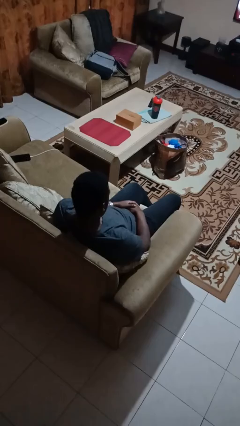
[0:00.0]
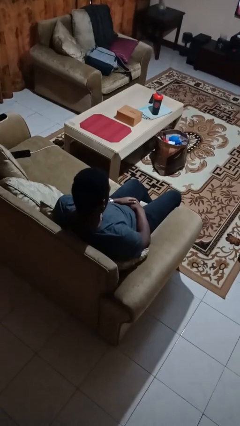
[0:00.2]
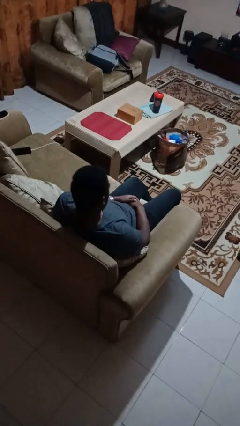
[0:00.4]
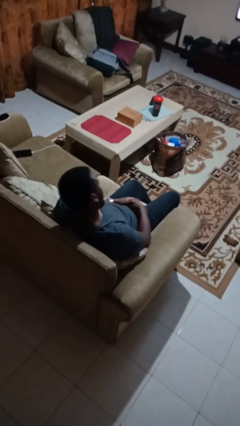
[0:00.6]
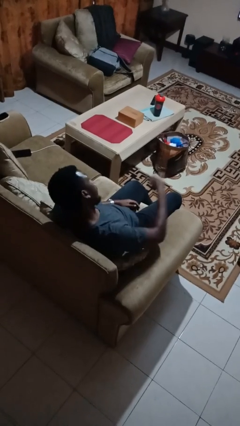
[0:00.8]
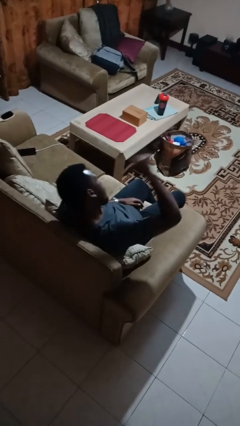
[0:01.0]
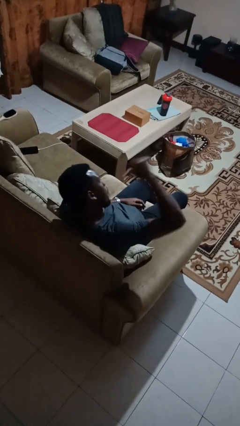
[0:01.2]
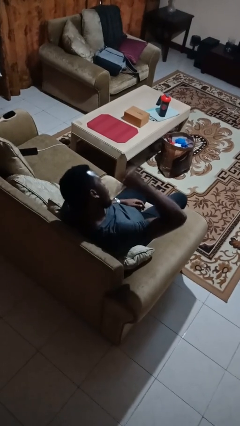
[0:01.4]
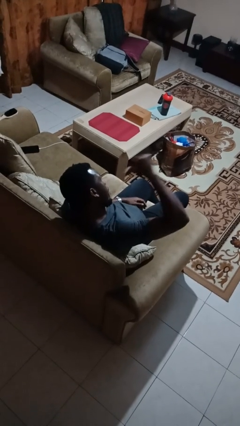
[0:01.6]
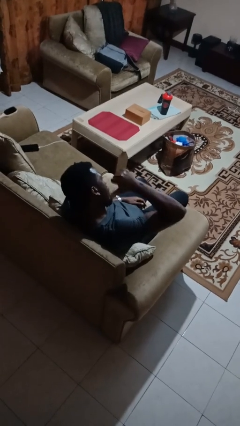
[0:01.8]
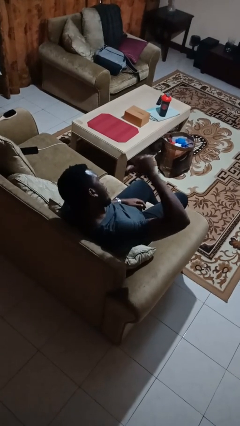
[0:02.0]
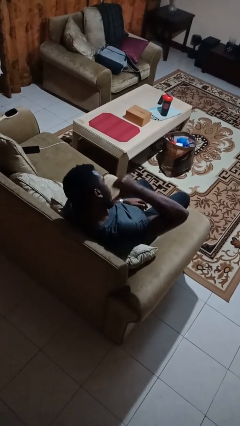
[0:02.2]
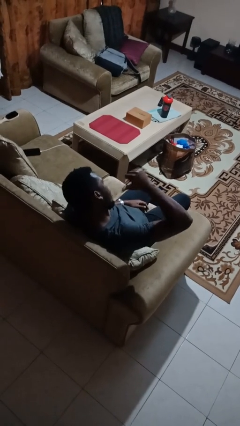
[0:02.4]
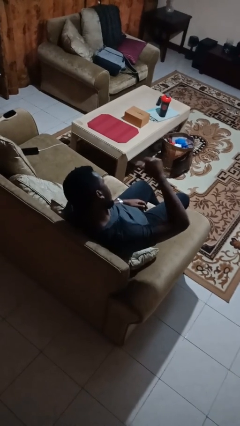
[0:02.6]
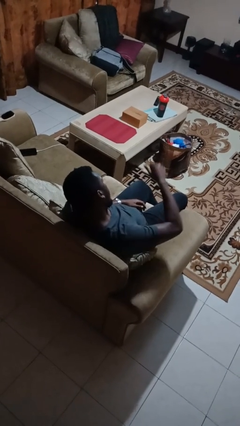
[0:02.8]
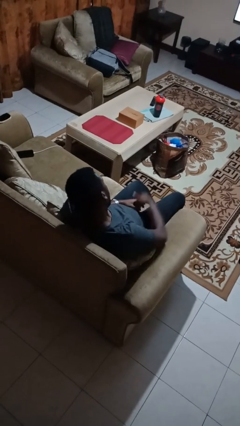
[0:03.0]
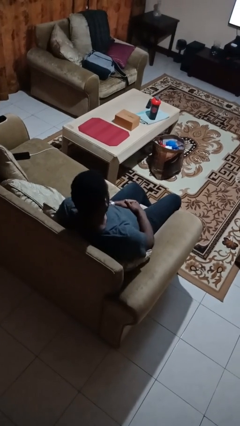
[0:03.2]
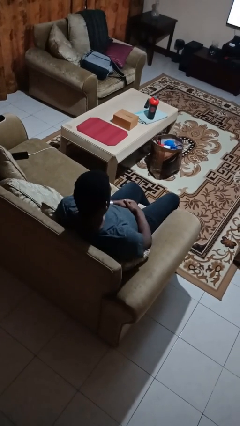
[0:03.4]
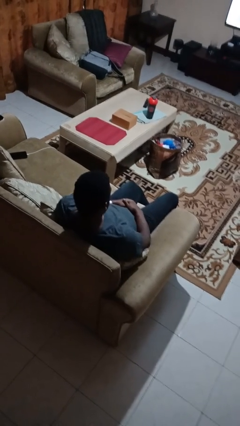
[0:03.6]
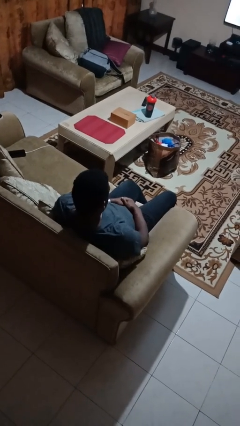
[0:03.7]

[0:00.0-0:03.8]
person gestures behind me

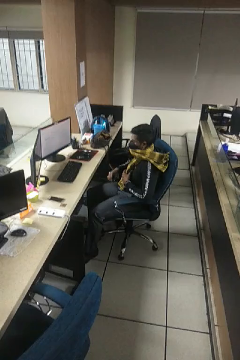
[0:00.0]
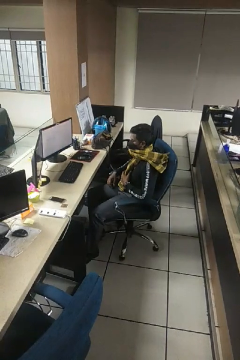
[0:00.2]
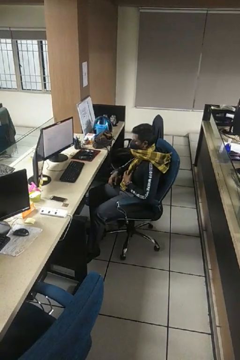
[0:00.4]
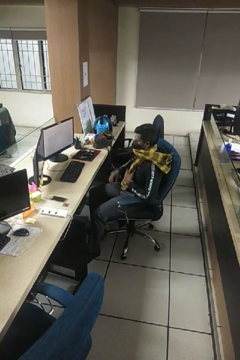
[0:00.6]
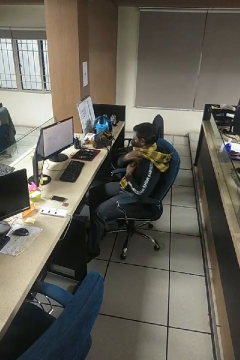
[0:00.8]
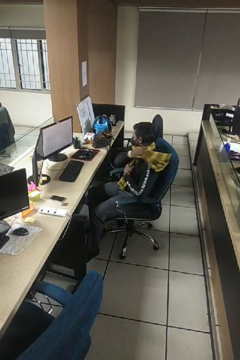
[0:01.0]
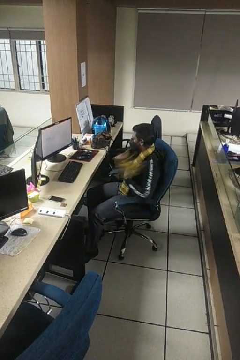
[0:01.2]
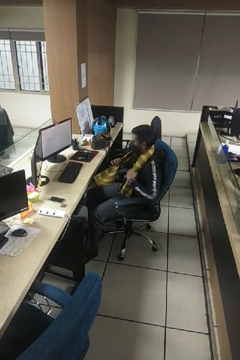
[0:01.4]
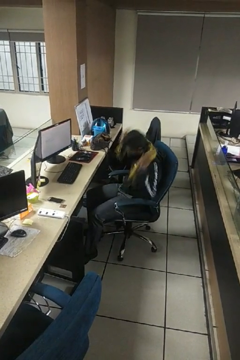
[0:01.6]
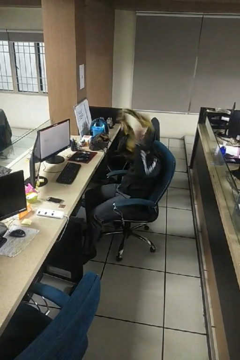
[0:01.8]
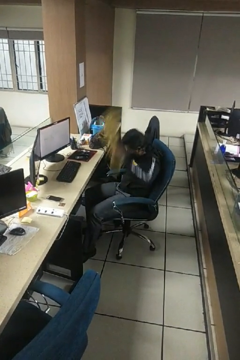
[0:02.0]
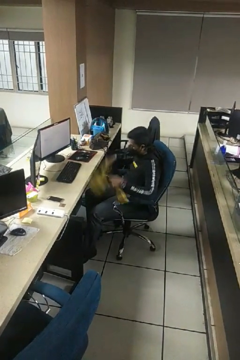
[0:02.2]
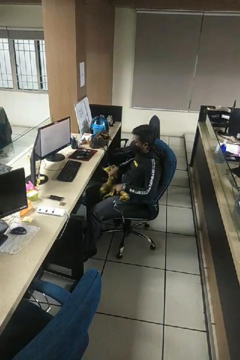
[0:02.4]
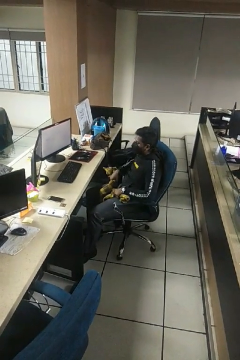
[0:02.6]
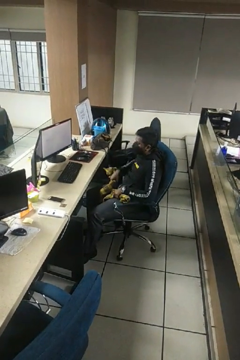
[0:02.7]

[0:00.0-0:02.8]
person takes off scarf

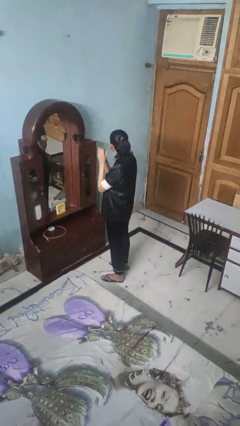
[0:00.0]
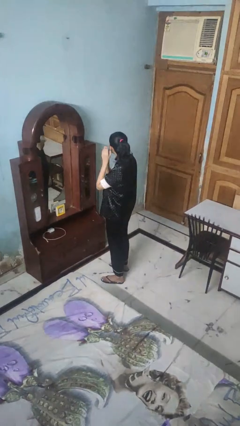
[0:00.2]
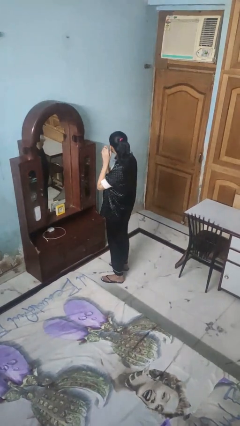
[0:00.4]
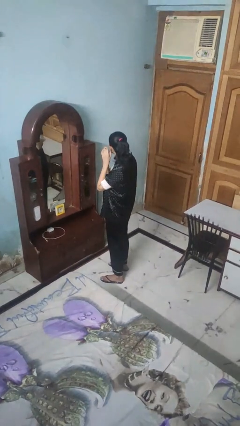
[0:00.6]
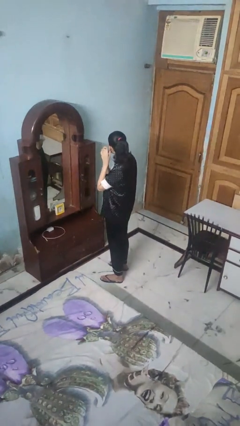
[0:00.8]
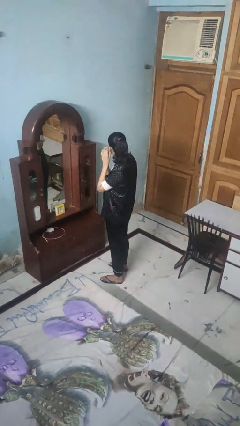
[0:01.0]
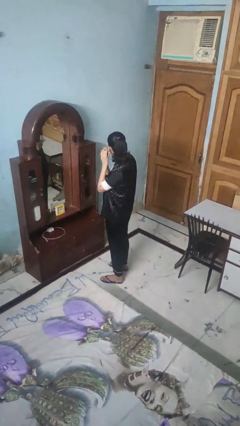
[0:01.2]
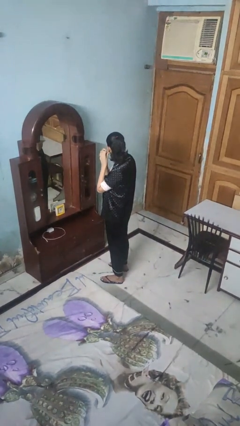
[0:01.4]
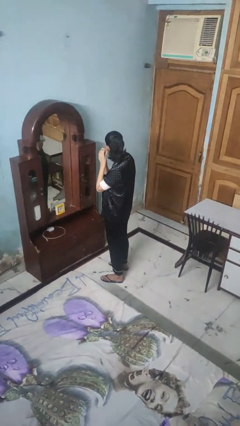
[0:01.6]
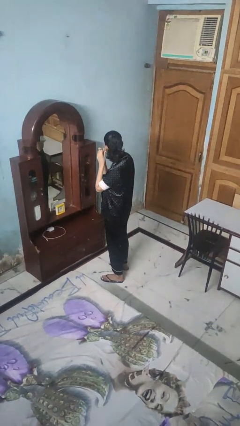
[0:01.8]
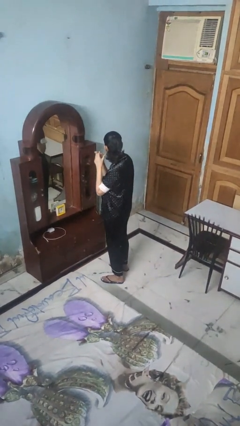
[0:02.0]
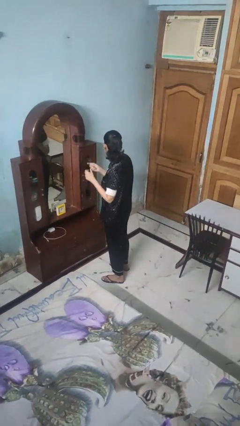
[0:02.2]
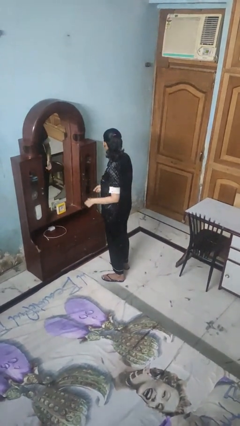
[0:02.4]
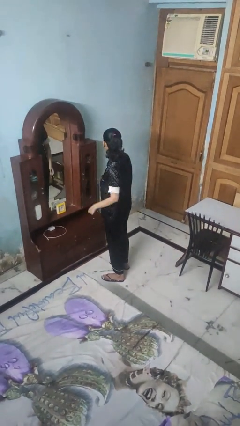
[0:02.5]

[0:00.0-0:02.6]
person puts on earrings

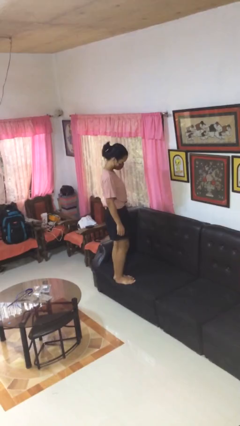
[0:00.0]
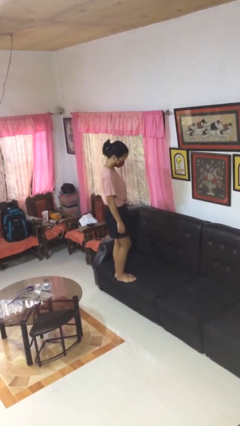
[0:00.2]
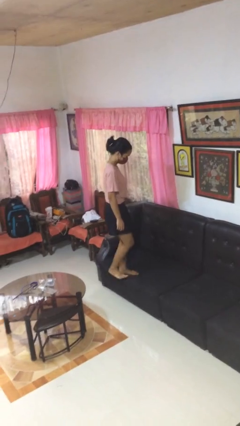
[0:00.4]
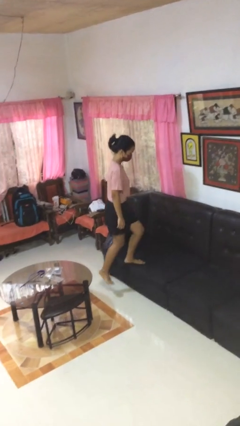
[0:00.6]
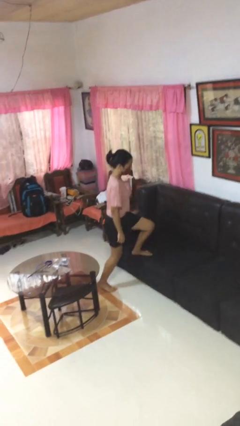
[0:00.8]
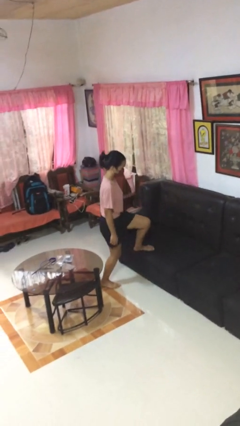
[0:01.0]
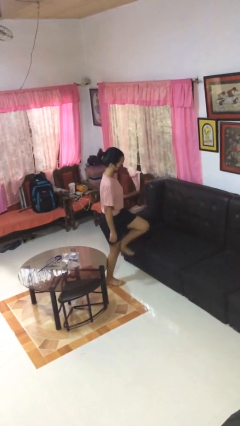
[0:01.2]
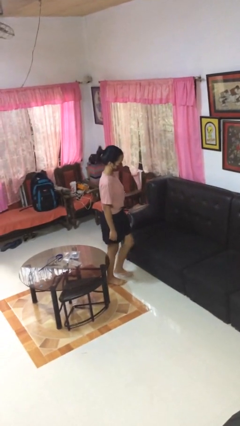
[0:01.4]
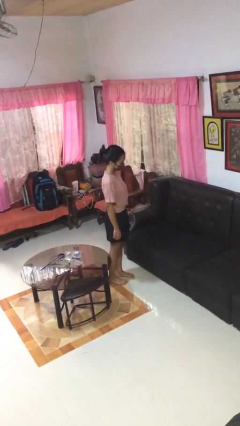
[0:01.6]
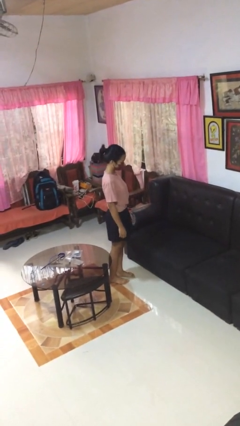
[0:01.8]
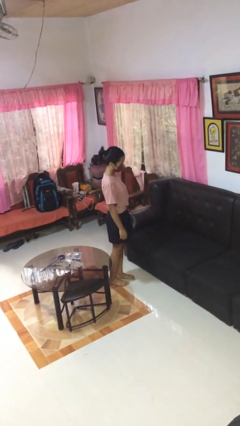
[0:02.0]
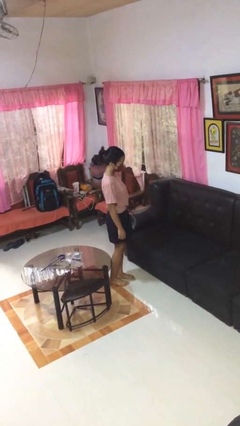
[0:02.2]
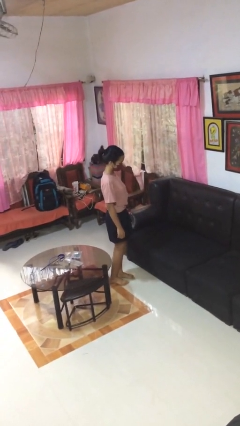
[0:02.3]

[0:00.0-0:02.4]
person climbs off couch

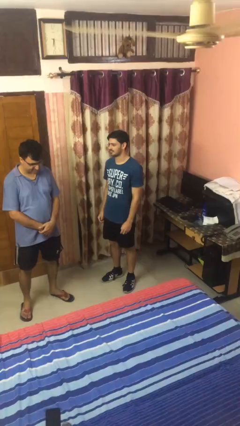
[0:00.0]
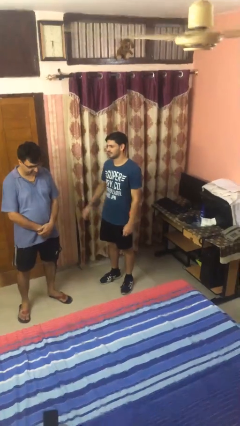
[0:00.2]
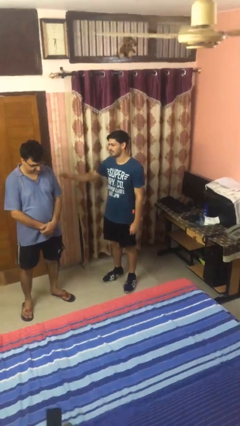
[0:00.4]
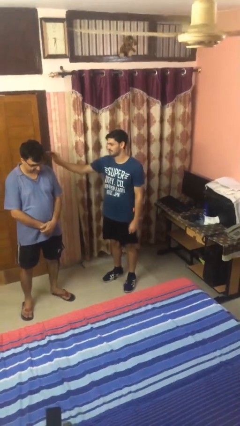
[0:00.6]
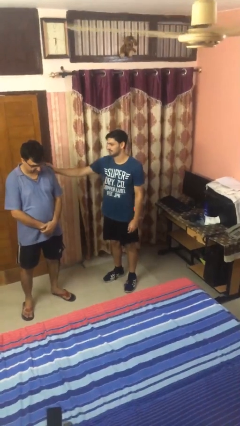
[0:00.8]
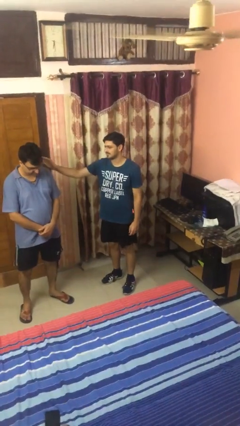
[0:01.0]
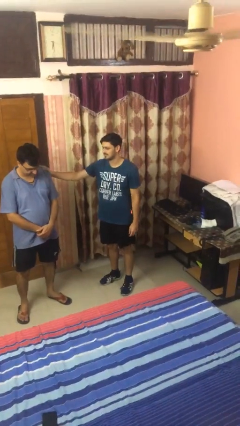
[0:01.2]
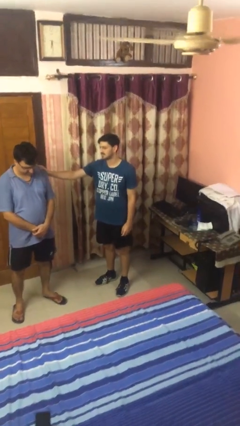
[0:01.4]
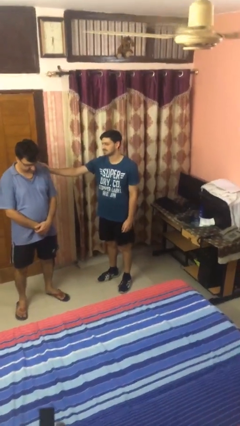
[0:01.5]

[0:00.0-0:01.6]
person pounds shoulders of person

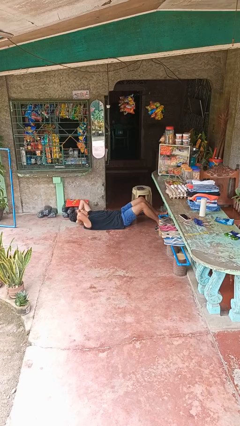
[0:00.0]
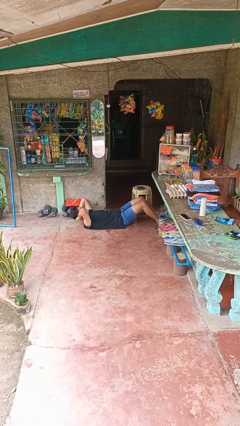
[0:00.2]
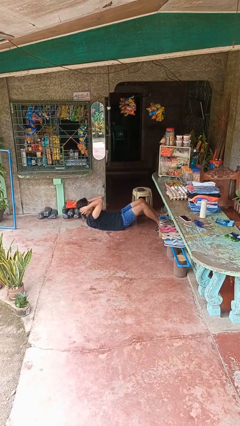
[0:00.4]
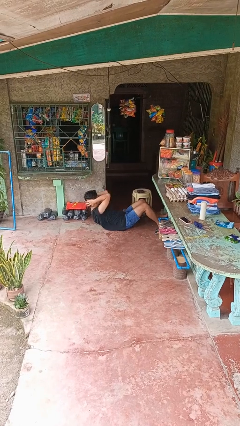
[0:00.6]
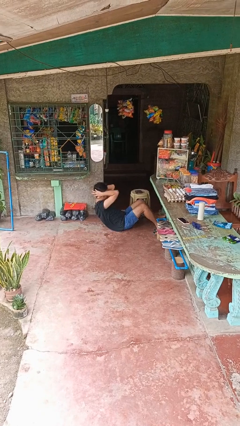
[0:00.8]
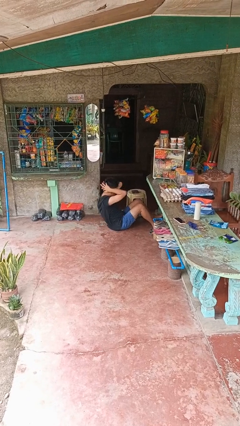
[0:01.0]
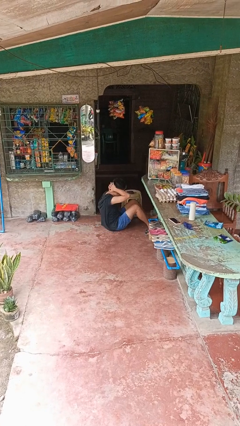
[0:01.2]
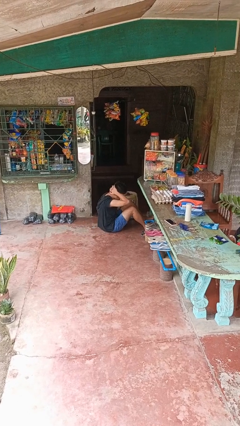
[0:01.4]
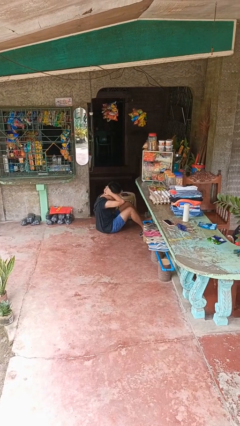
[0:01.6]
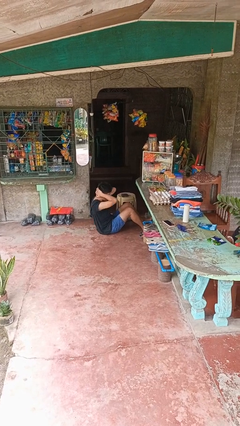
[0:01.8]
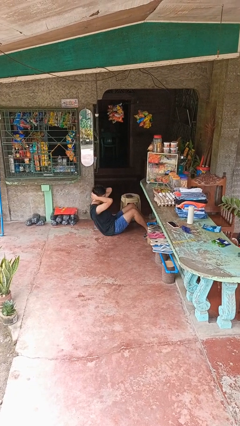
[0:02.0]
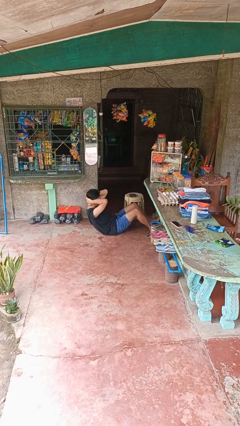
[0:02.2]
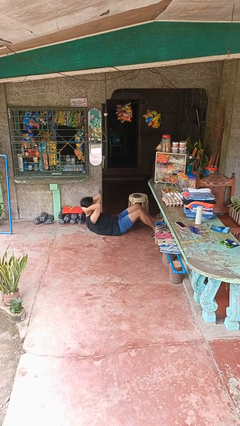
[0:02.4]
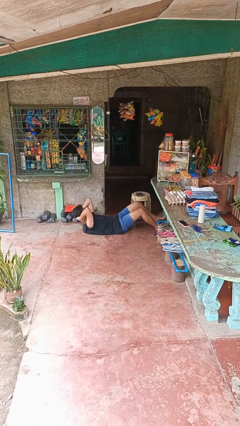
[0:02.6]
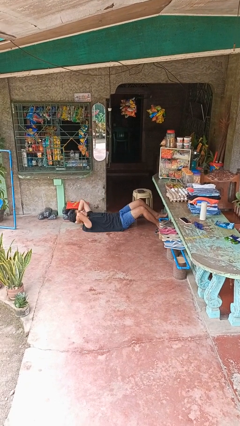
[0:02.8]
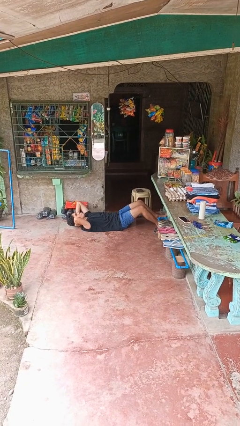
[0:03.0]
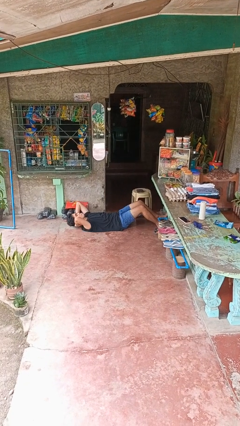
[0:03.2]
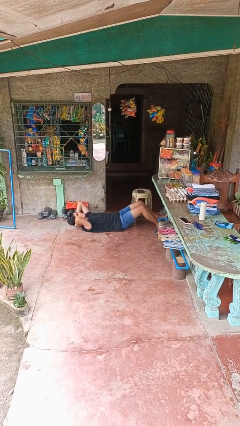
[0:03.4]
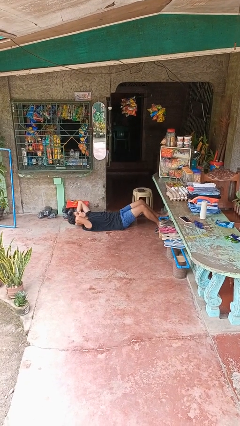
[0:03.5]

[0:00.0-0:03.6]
person exercises with situp

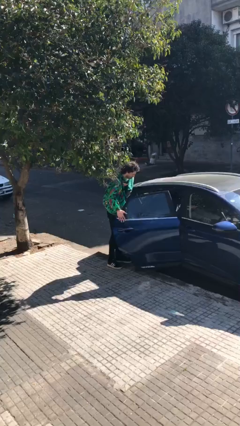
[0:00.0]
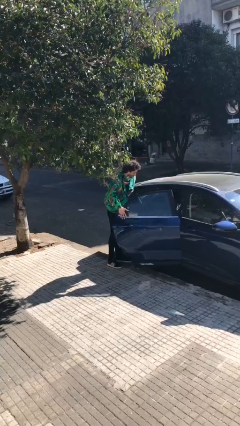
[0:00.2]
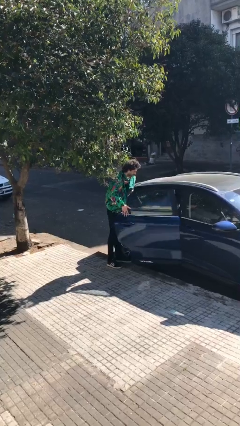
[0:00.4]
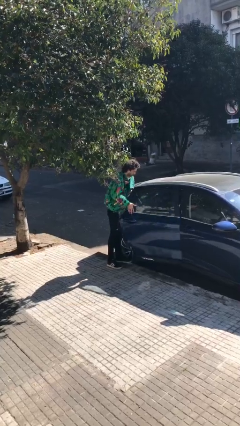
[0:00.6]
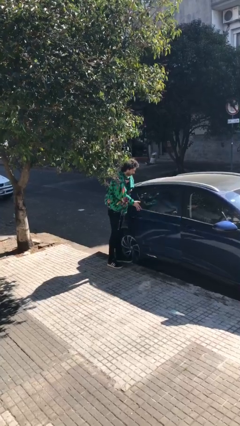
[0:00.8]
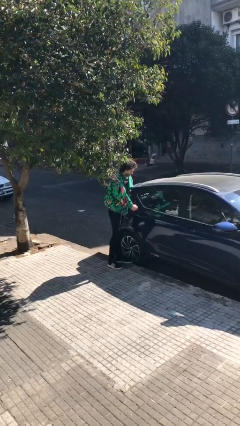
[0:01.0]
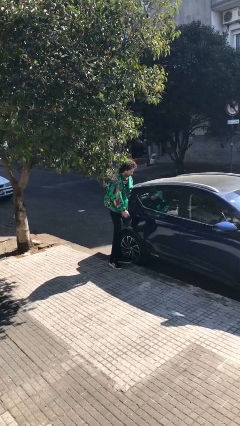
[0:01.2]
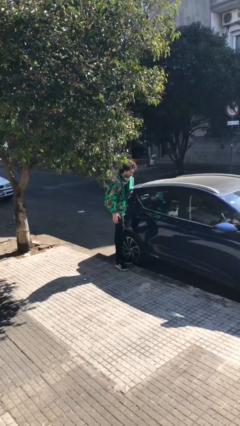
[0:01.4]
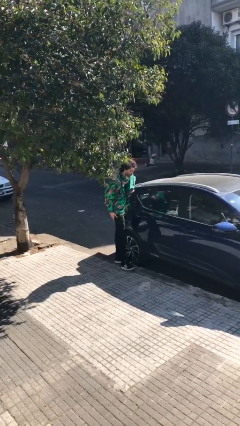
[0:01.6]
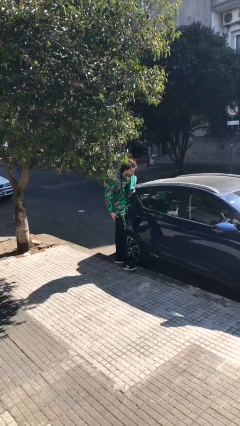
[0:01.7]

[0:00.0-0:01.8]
person closes car door
